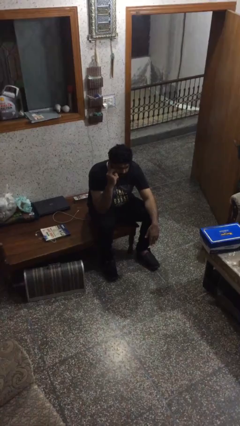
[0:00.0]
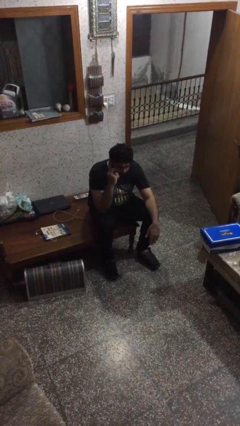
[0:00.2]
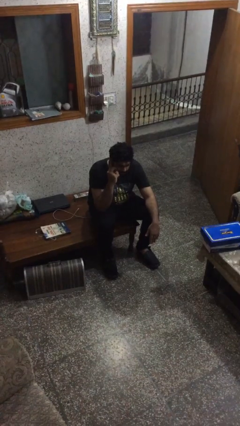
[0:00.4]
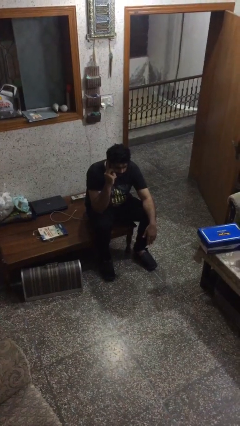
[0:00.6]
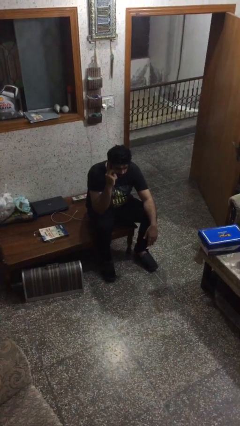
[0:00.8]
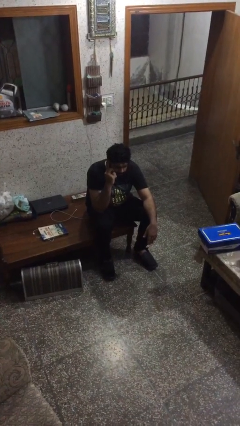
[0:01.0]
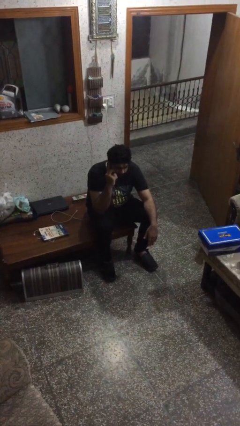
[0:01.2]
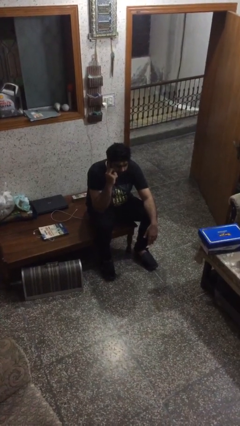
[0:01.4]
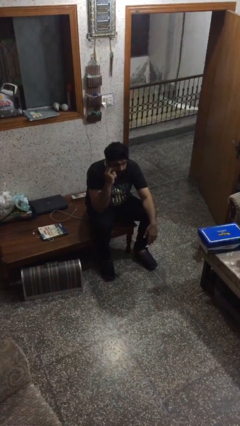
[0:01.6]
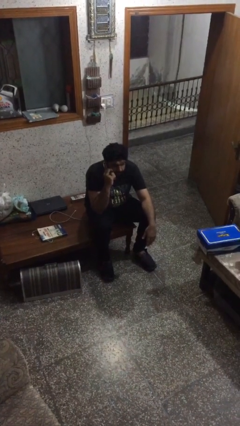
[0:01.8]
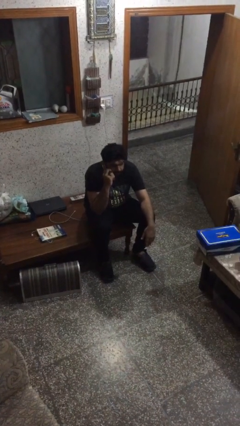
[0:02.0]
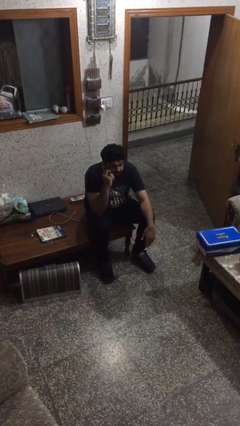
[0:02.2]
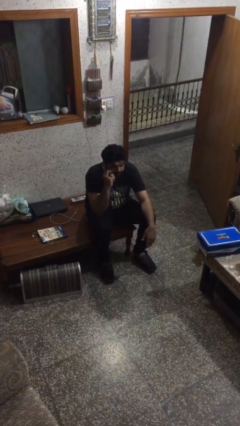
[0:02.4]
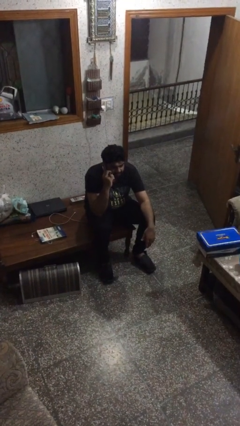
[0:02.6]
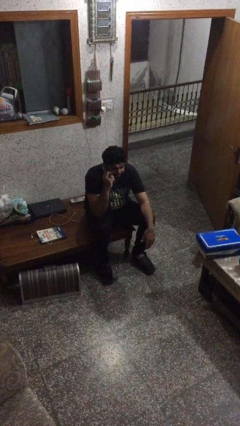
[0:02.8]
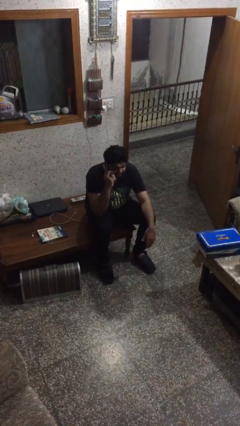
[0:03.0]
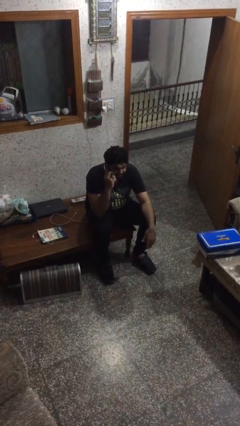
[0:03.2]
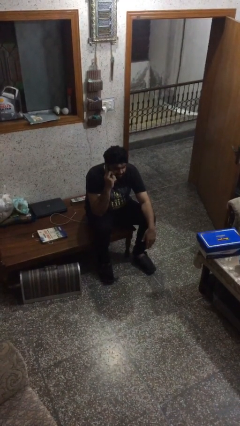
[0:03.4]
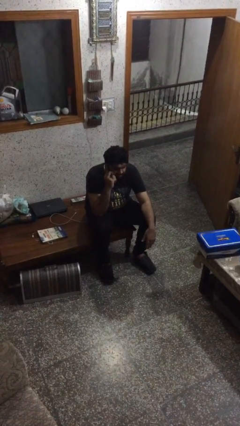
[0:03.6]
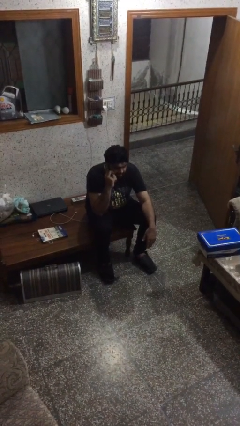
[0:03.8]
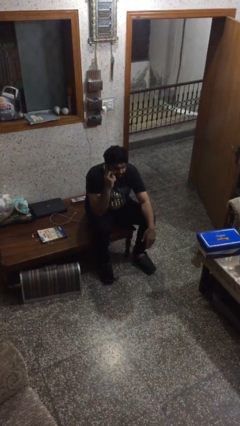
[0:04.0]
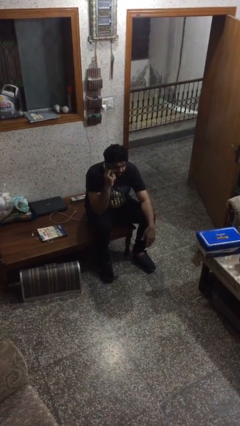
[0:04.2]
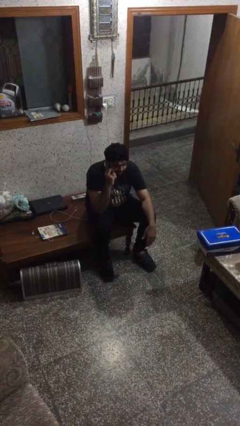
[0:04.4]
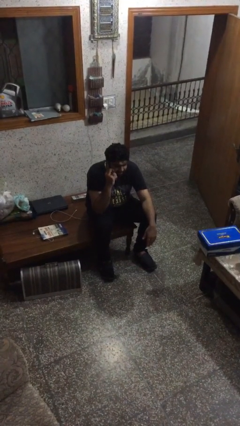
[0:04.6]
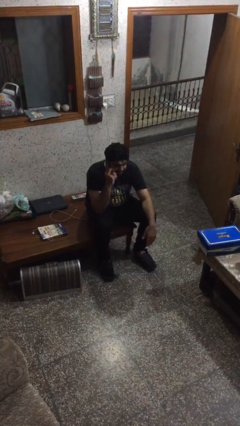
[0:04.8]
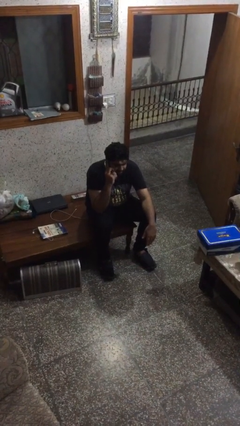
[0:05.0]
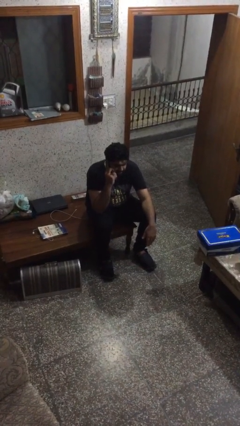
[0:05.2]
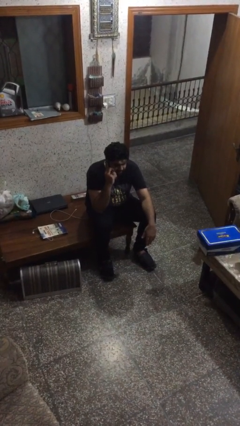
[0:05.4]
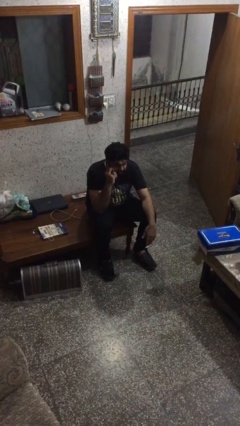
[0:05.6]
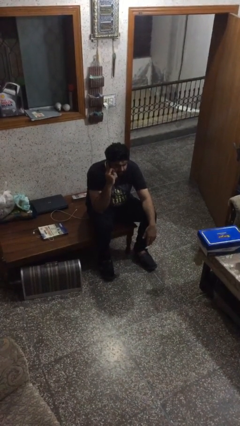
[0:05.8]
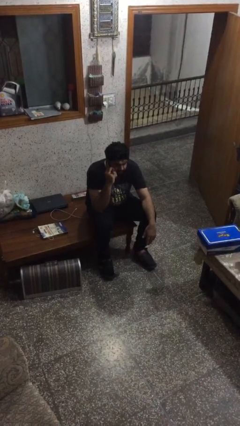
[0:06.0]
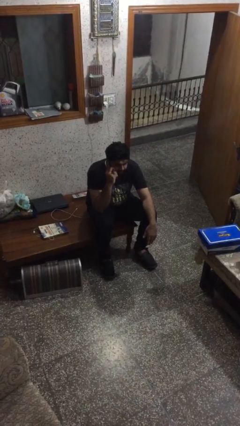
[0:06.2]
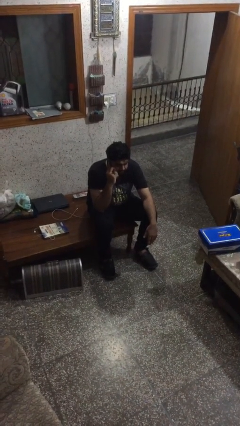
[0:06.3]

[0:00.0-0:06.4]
person talks on phone

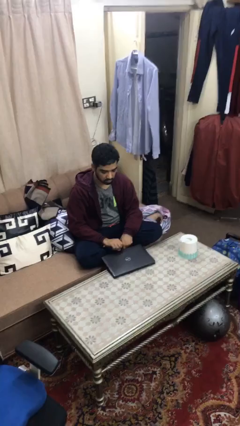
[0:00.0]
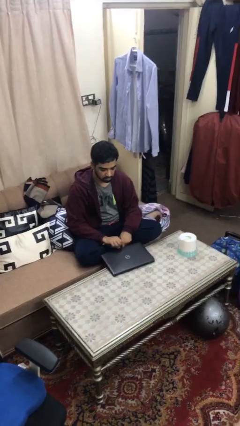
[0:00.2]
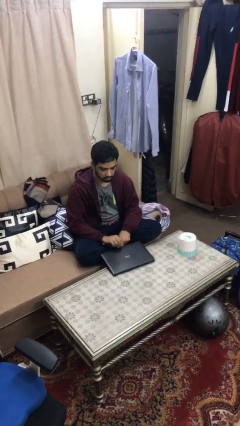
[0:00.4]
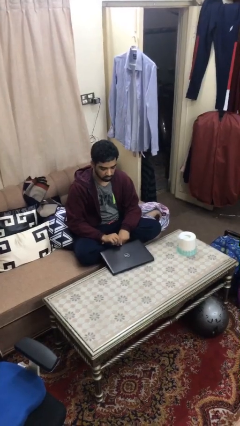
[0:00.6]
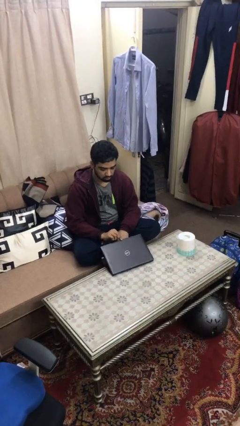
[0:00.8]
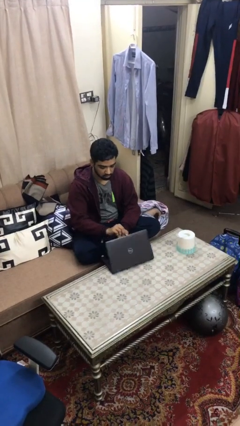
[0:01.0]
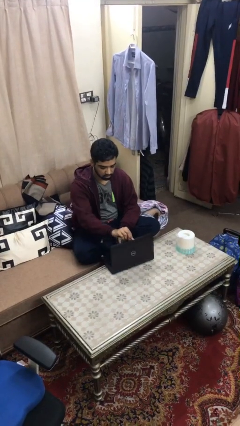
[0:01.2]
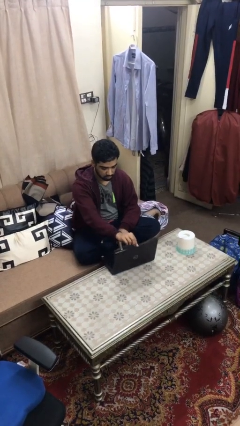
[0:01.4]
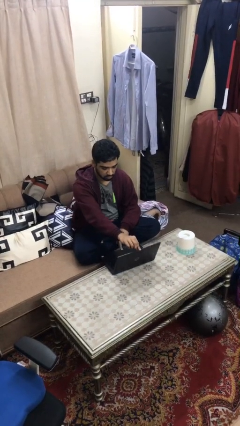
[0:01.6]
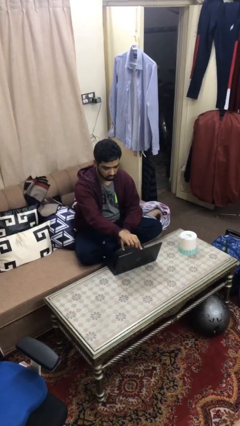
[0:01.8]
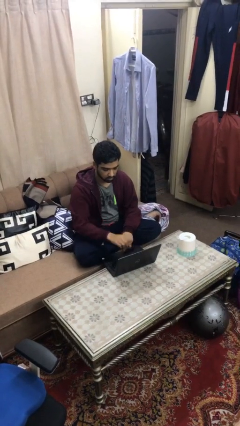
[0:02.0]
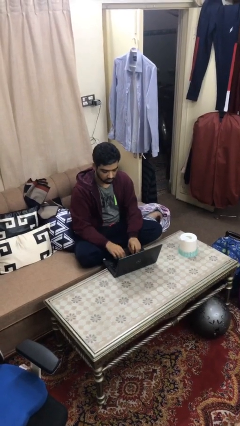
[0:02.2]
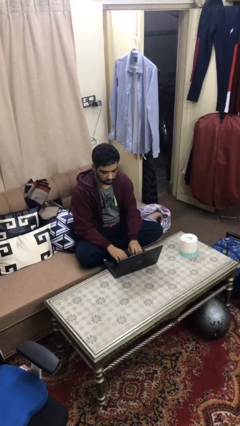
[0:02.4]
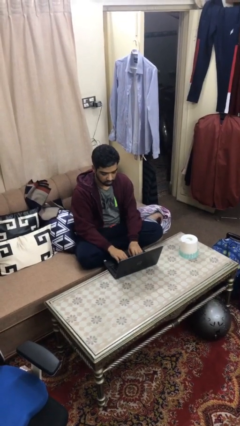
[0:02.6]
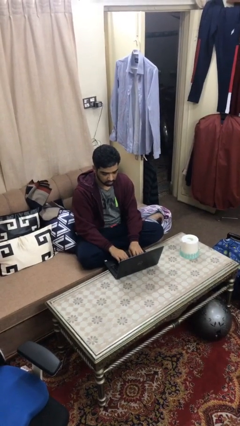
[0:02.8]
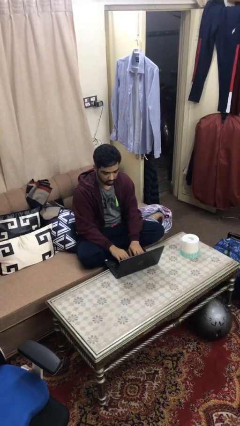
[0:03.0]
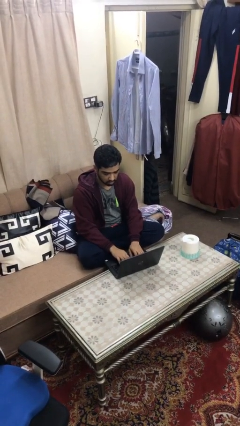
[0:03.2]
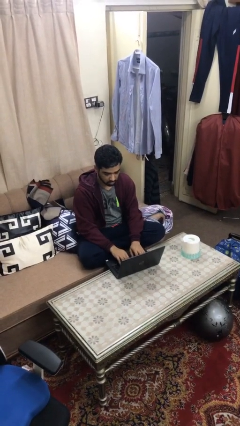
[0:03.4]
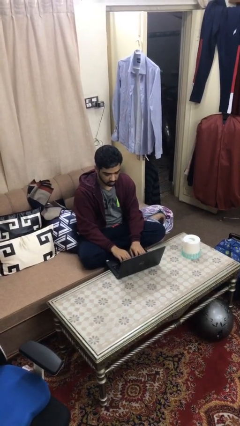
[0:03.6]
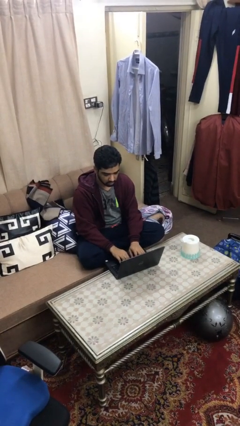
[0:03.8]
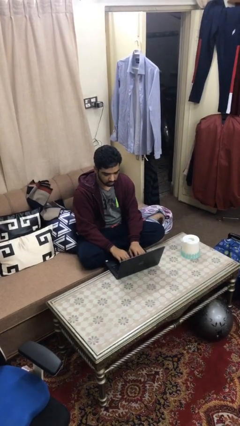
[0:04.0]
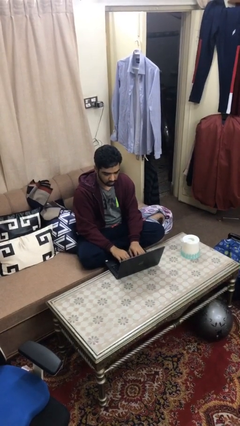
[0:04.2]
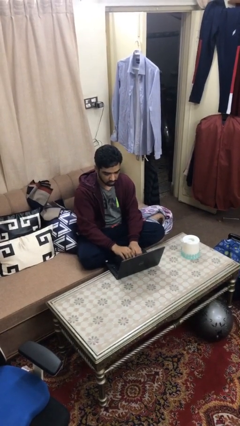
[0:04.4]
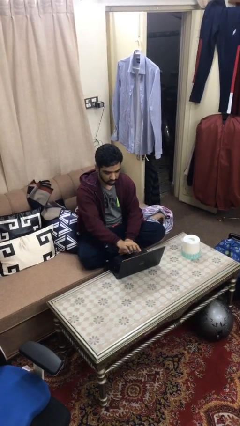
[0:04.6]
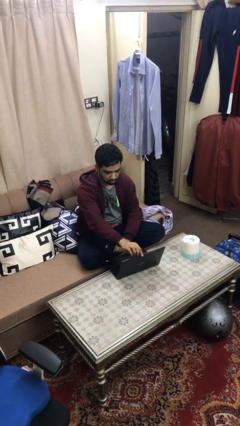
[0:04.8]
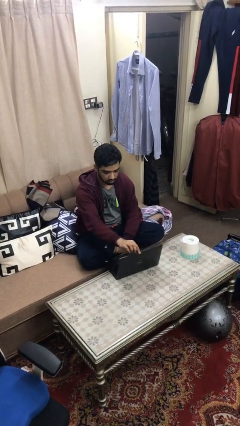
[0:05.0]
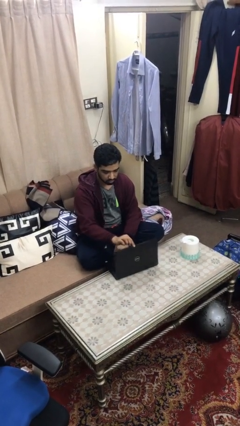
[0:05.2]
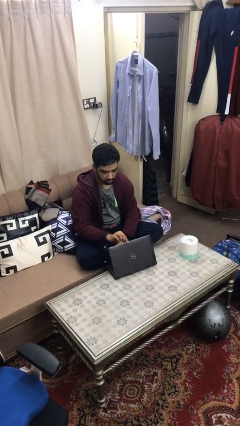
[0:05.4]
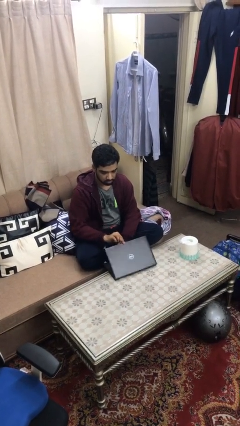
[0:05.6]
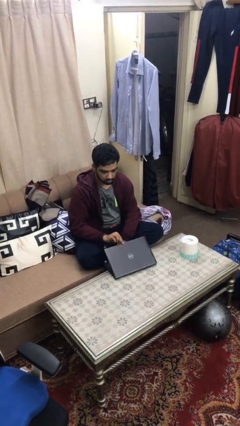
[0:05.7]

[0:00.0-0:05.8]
person interacts with laptop

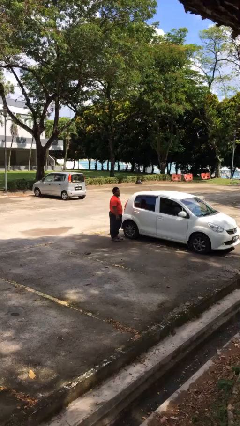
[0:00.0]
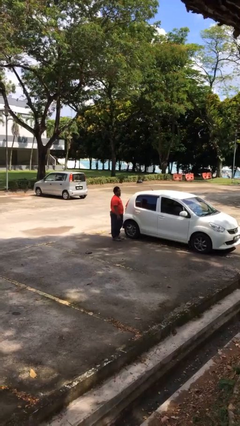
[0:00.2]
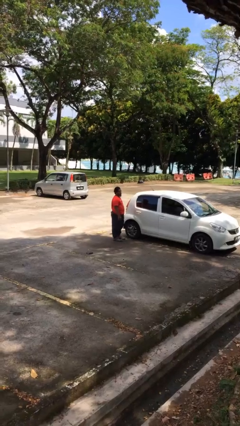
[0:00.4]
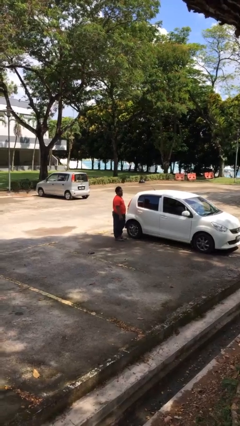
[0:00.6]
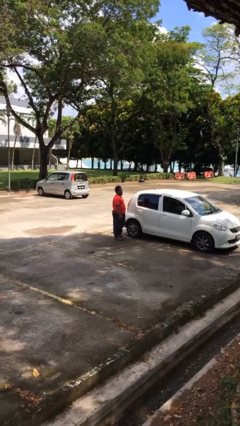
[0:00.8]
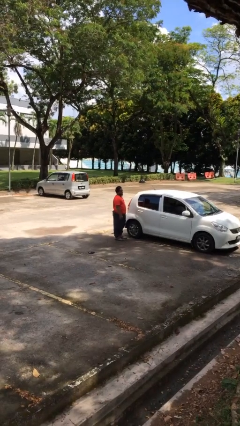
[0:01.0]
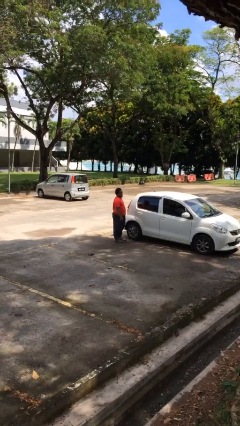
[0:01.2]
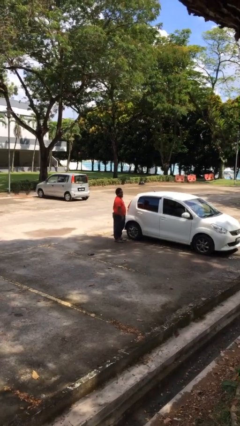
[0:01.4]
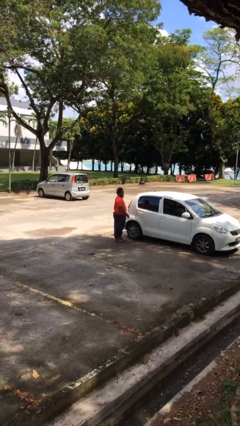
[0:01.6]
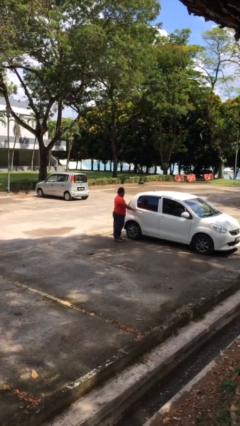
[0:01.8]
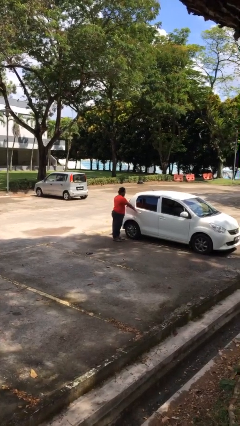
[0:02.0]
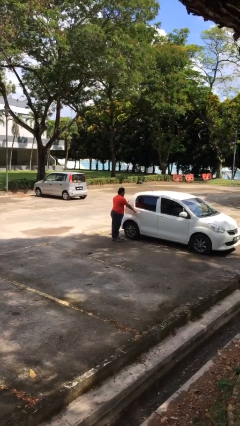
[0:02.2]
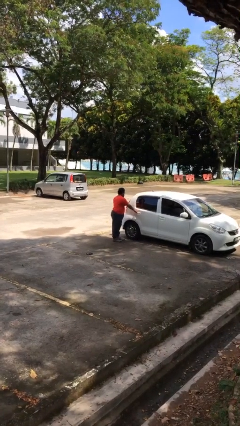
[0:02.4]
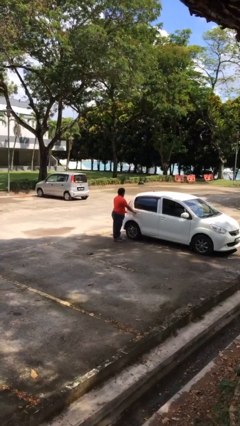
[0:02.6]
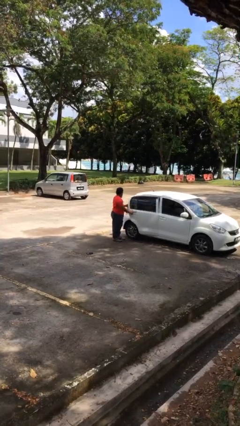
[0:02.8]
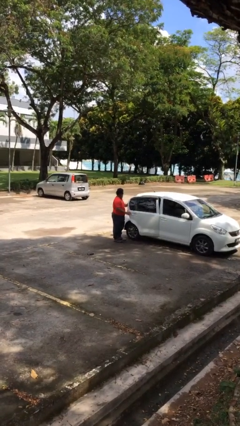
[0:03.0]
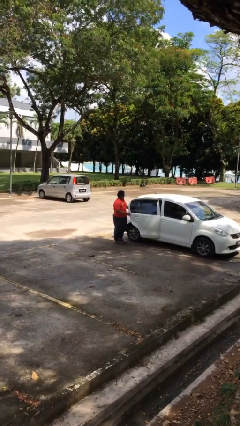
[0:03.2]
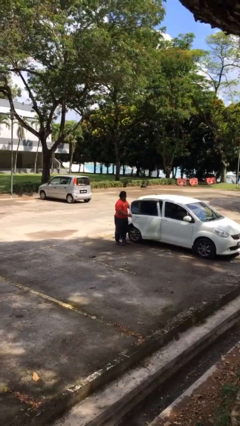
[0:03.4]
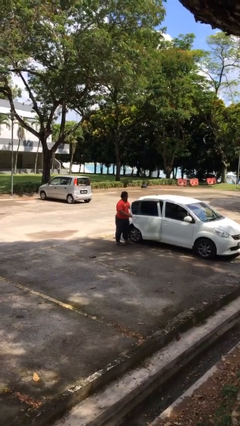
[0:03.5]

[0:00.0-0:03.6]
person opens car door

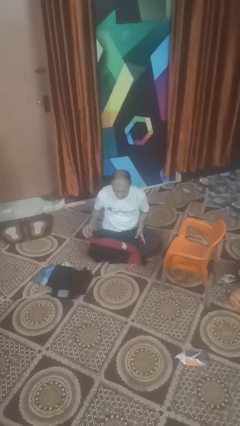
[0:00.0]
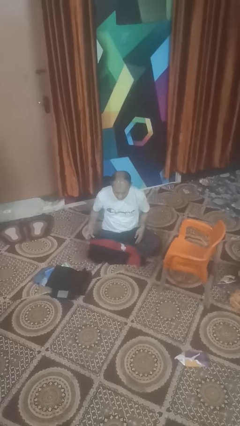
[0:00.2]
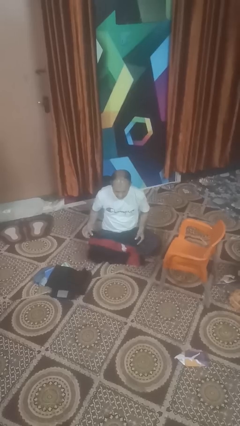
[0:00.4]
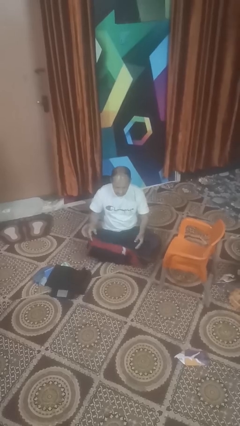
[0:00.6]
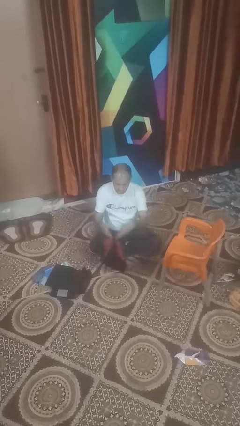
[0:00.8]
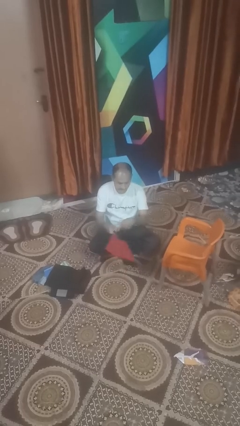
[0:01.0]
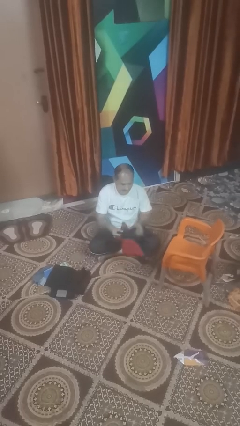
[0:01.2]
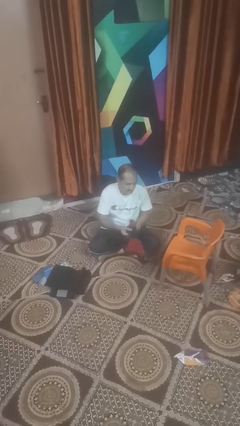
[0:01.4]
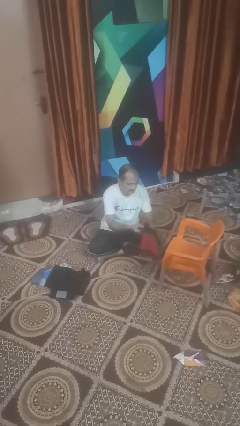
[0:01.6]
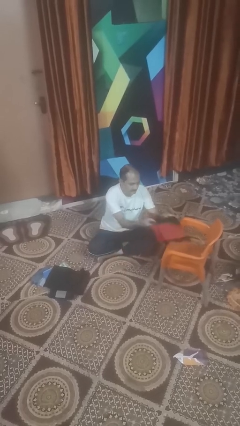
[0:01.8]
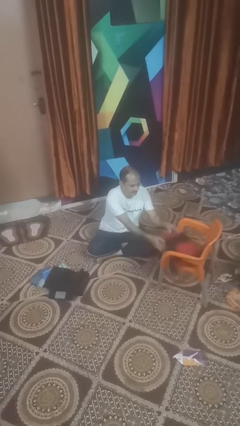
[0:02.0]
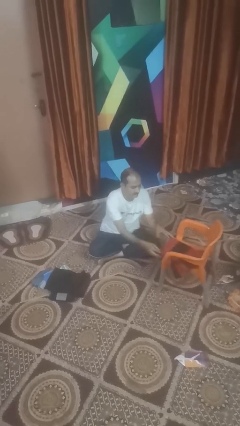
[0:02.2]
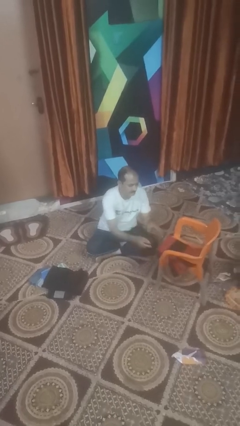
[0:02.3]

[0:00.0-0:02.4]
person folds shirt
